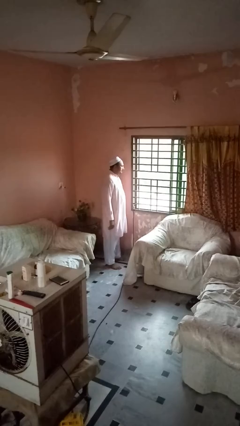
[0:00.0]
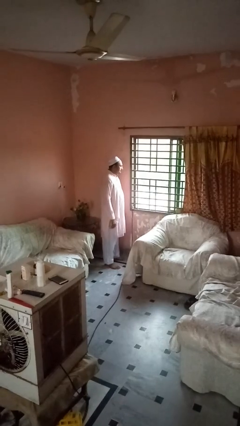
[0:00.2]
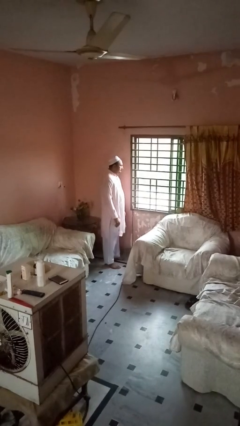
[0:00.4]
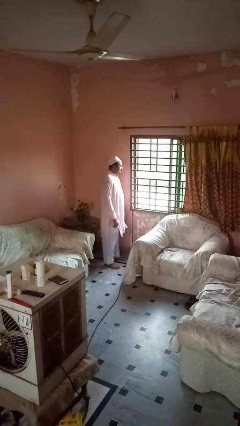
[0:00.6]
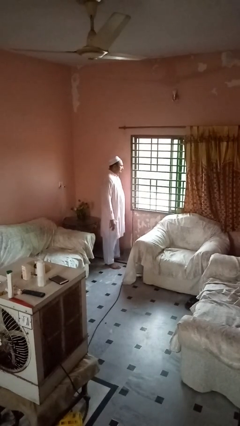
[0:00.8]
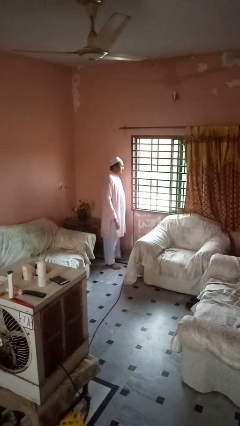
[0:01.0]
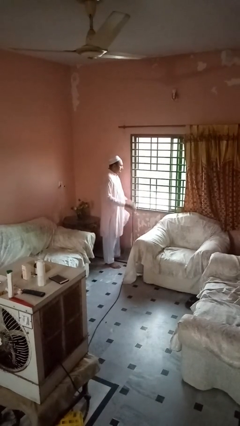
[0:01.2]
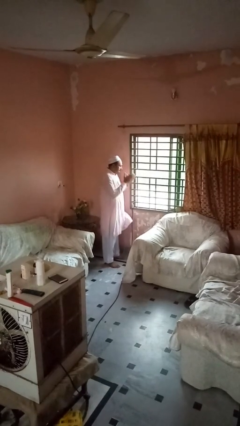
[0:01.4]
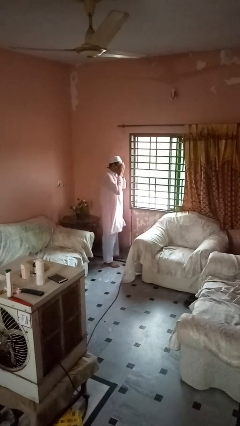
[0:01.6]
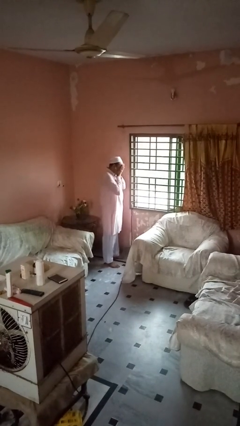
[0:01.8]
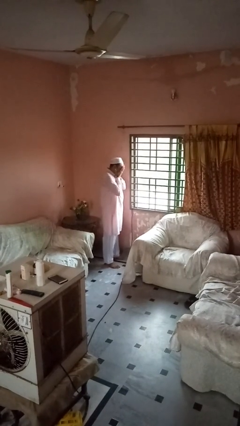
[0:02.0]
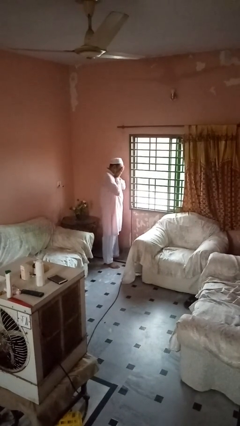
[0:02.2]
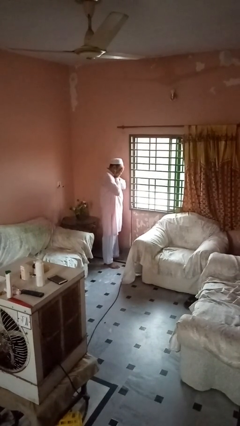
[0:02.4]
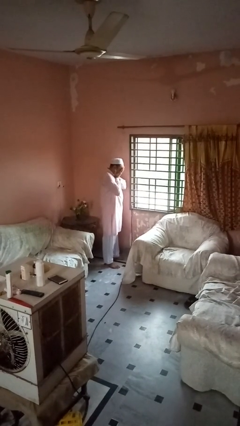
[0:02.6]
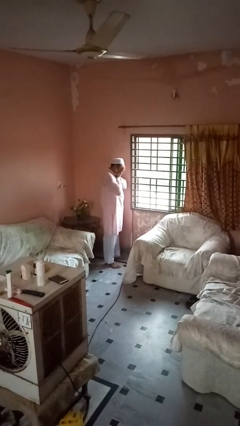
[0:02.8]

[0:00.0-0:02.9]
person covers face with hands

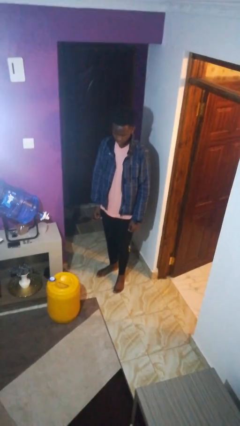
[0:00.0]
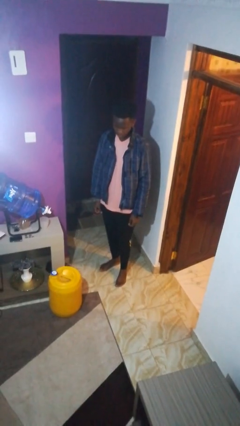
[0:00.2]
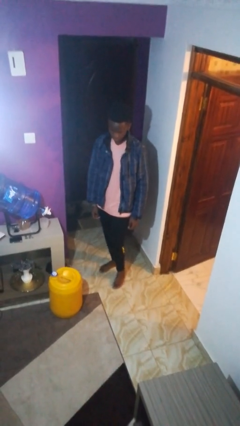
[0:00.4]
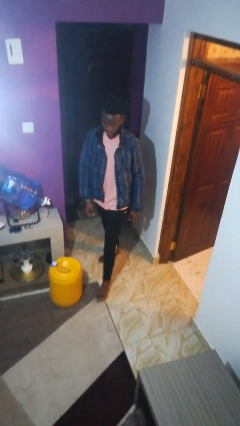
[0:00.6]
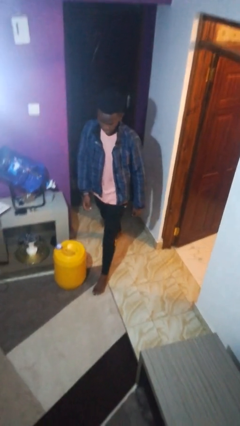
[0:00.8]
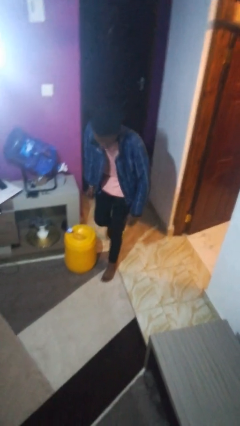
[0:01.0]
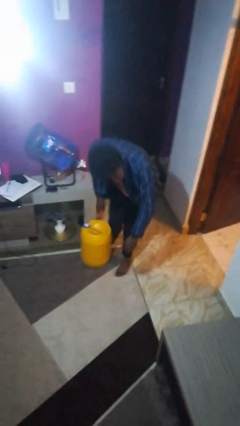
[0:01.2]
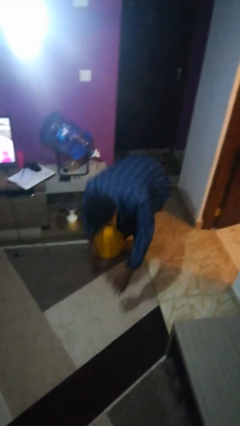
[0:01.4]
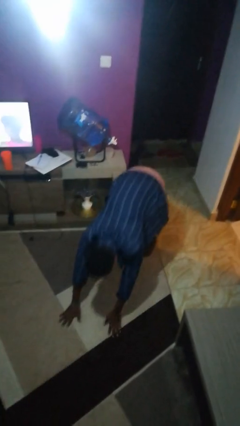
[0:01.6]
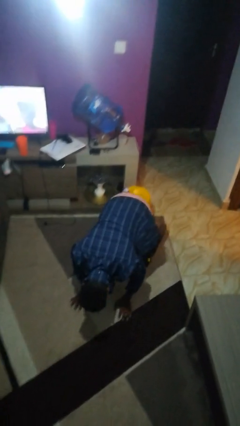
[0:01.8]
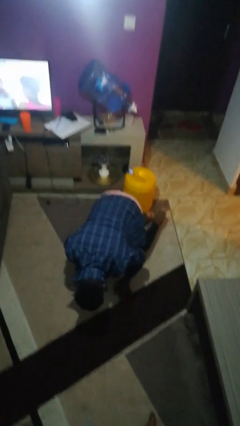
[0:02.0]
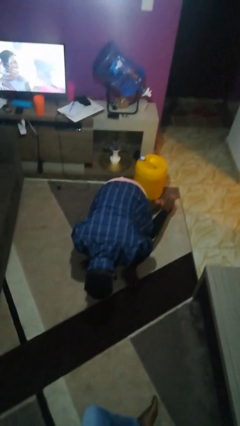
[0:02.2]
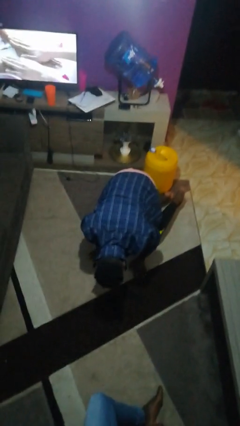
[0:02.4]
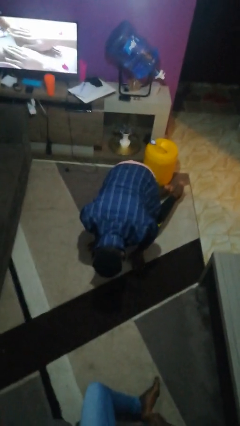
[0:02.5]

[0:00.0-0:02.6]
person trips on object on floor

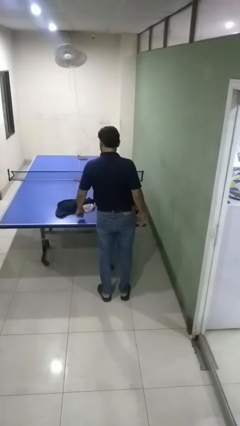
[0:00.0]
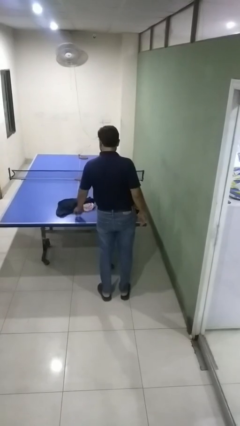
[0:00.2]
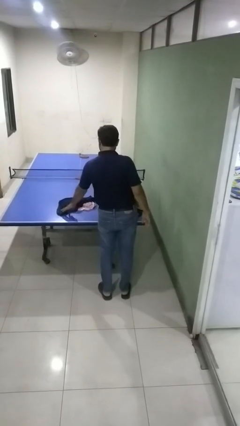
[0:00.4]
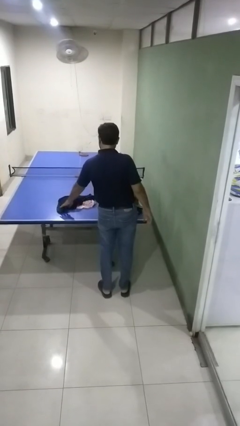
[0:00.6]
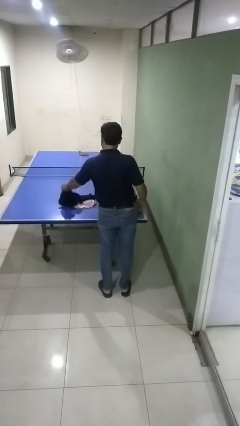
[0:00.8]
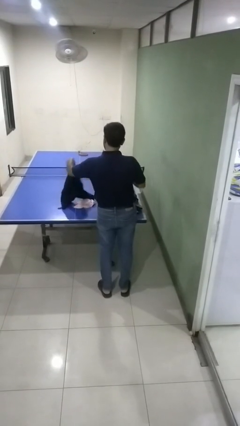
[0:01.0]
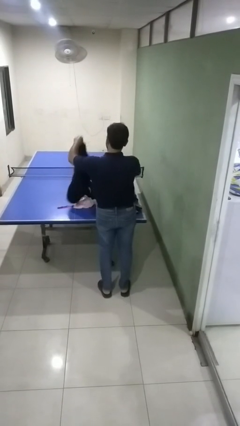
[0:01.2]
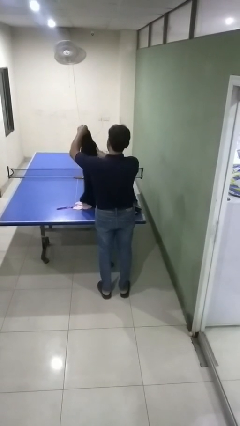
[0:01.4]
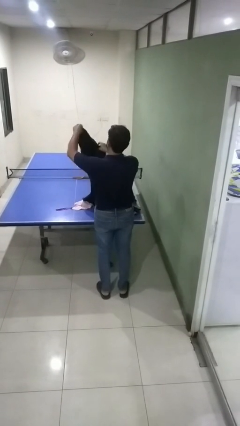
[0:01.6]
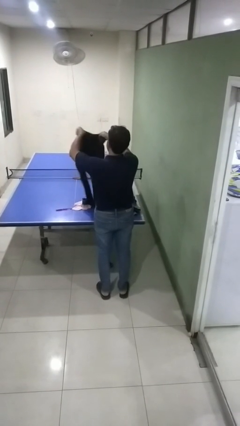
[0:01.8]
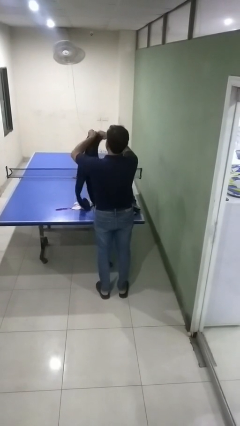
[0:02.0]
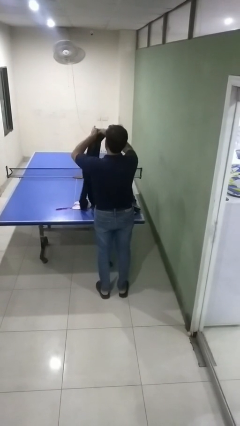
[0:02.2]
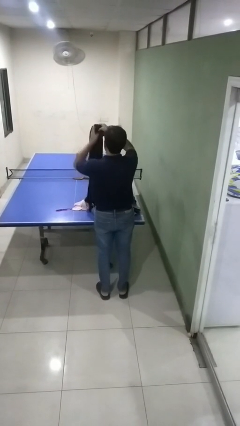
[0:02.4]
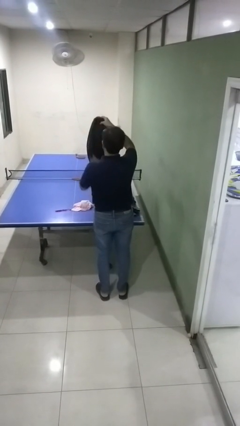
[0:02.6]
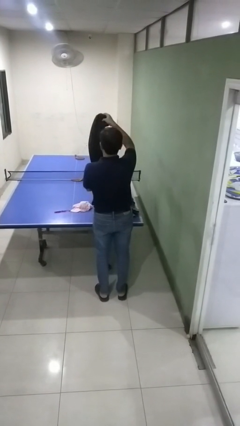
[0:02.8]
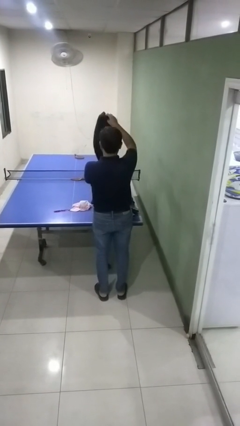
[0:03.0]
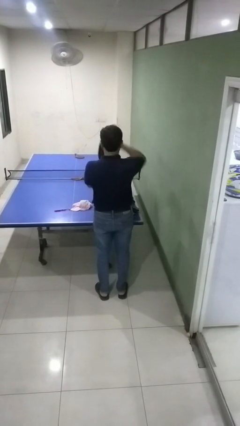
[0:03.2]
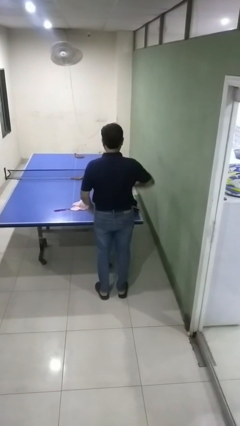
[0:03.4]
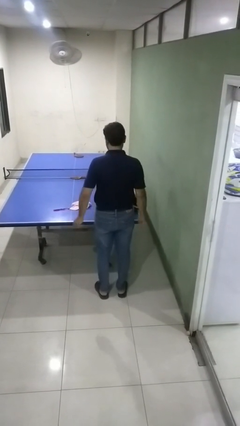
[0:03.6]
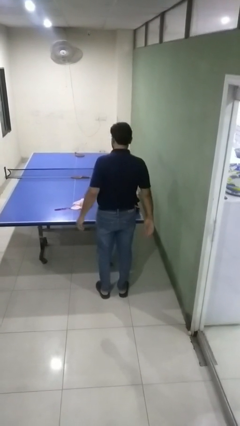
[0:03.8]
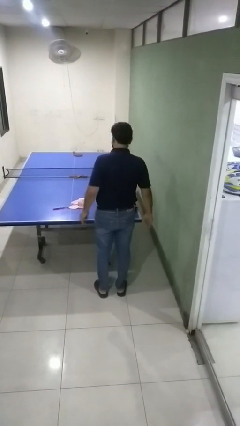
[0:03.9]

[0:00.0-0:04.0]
person folds pants

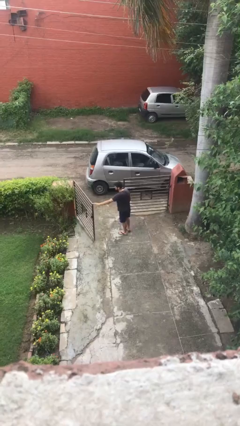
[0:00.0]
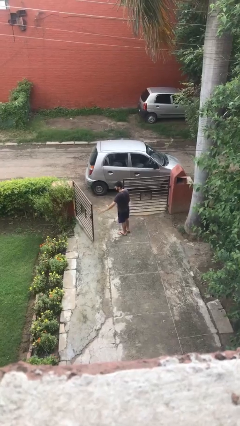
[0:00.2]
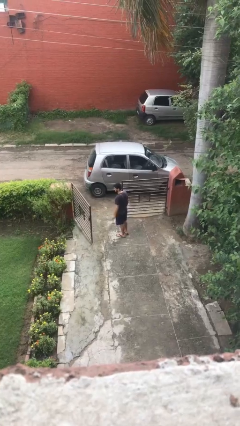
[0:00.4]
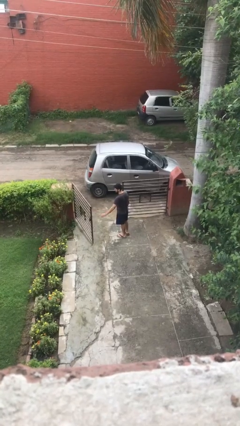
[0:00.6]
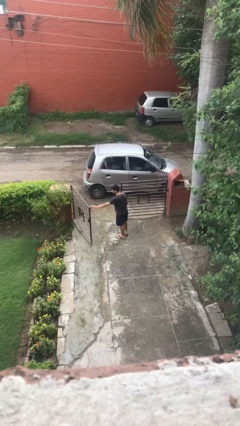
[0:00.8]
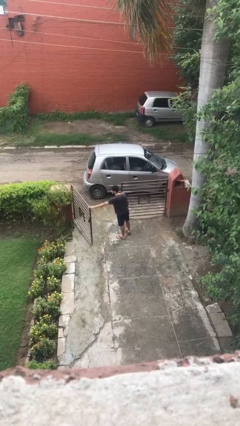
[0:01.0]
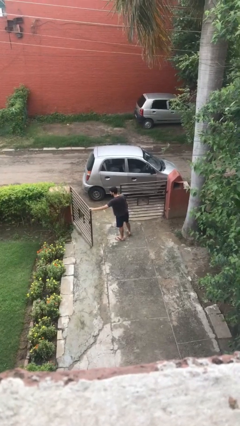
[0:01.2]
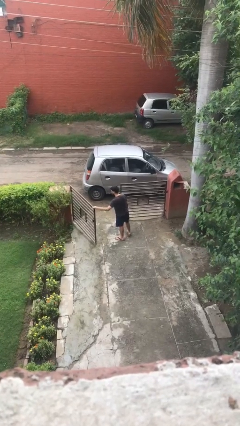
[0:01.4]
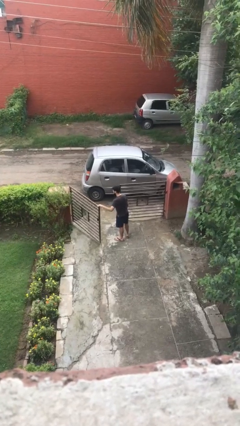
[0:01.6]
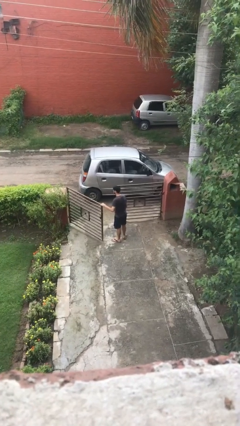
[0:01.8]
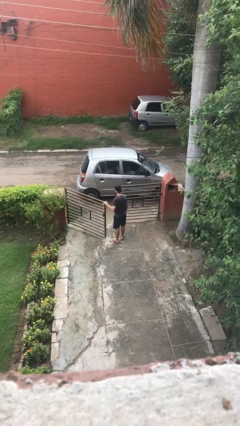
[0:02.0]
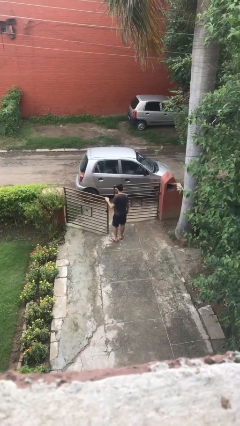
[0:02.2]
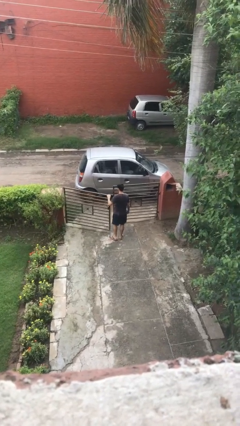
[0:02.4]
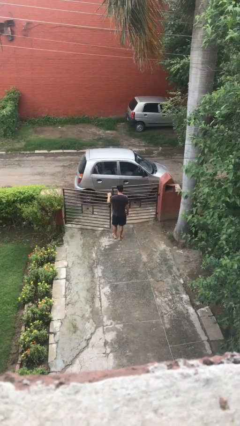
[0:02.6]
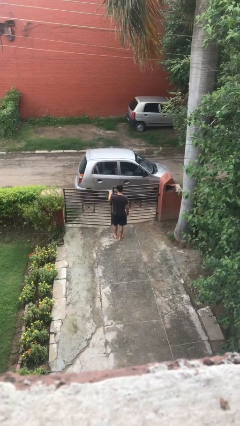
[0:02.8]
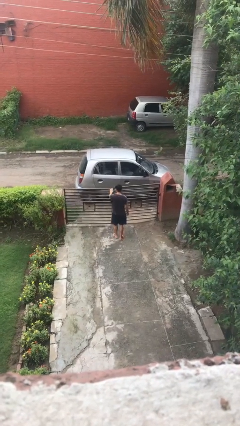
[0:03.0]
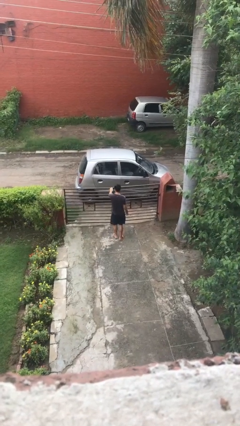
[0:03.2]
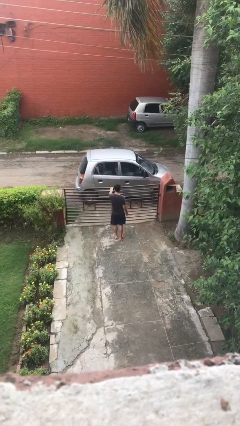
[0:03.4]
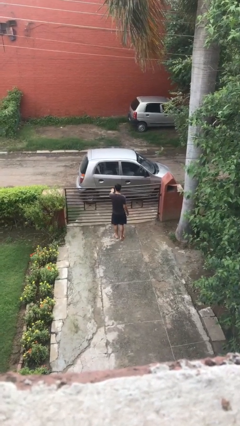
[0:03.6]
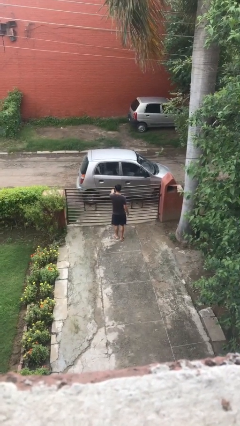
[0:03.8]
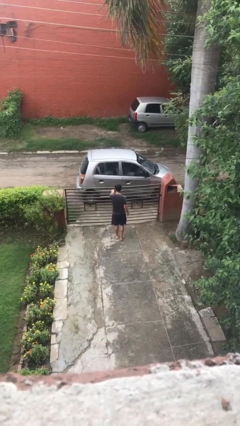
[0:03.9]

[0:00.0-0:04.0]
person closes gate

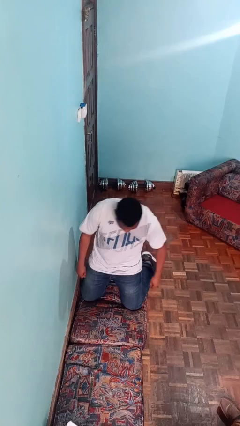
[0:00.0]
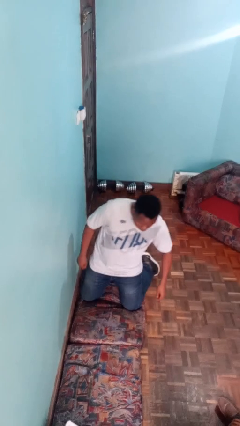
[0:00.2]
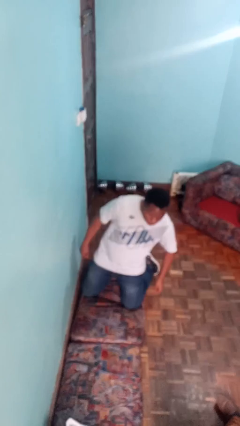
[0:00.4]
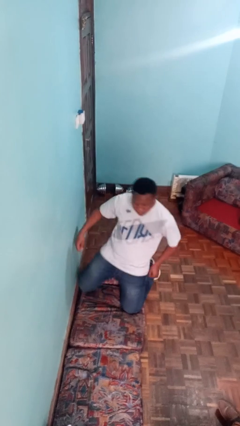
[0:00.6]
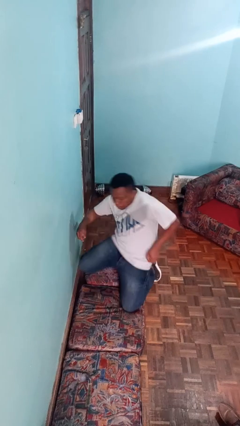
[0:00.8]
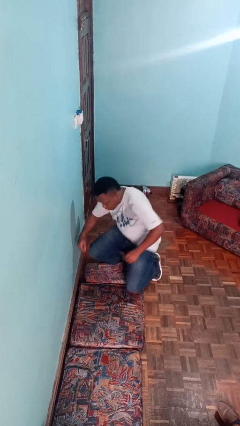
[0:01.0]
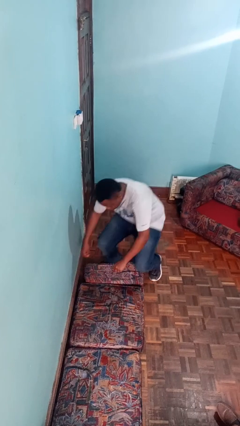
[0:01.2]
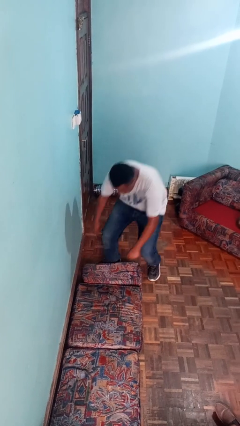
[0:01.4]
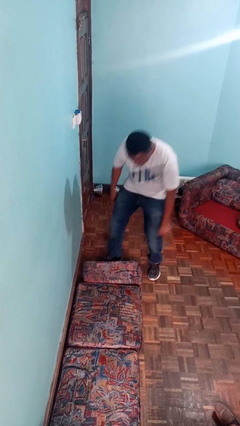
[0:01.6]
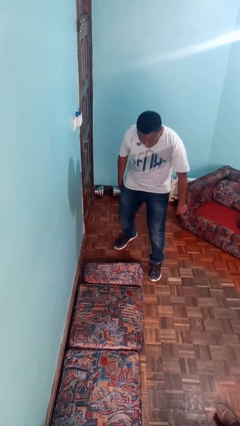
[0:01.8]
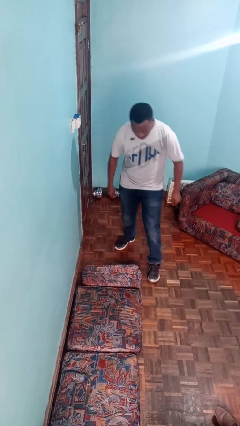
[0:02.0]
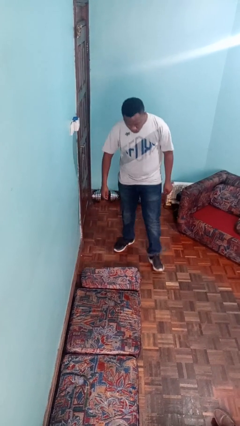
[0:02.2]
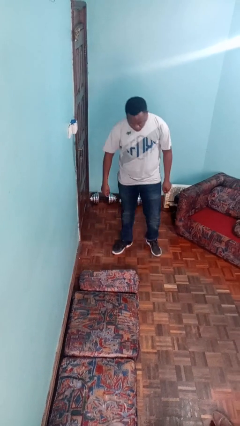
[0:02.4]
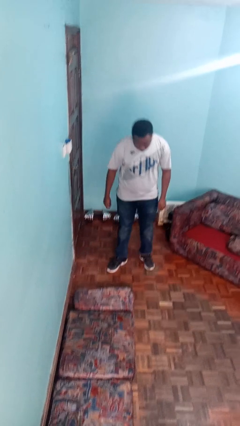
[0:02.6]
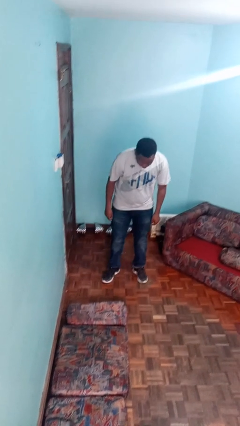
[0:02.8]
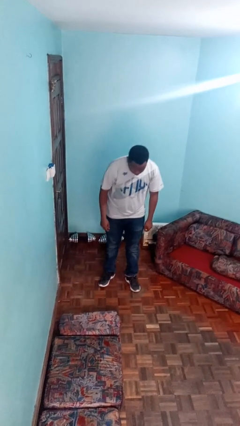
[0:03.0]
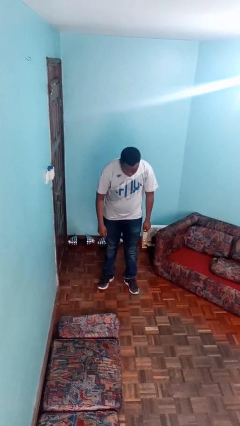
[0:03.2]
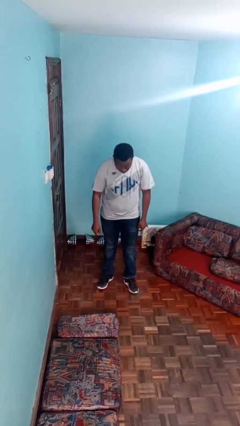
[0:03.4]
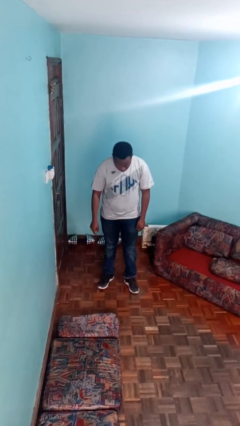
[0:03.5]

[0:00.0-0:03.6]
person stands up from floor

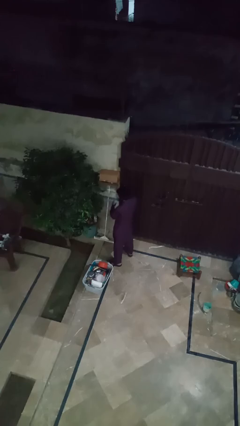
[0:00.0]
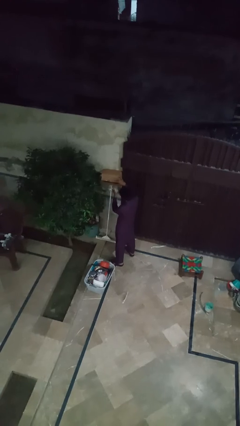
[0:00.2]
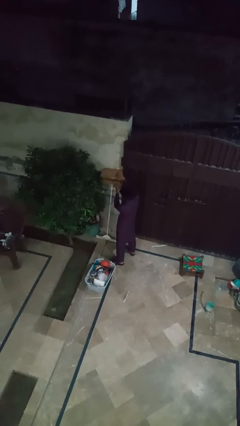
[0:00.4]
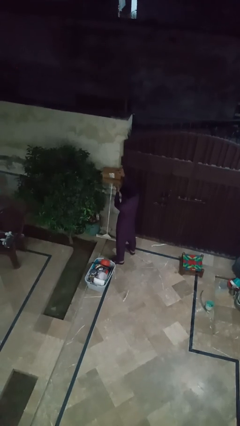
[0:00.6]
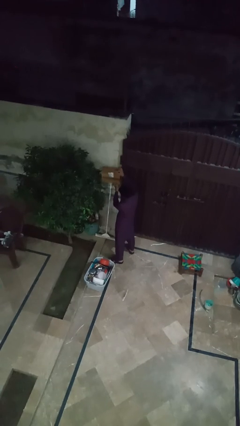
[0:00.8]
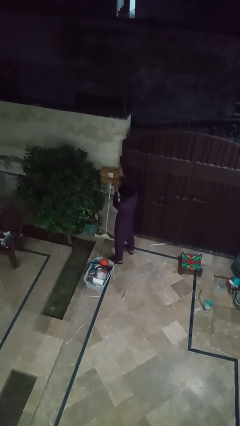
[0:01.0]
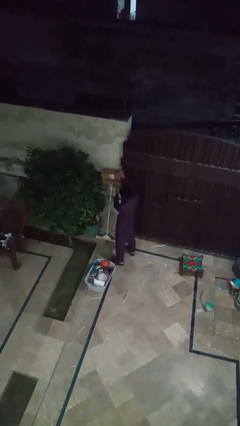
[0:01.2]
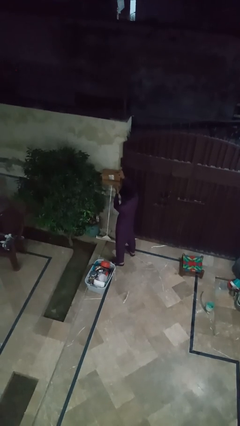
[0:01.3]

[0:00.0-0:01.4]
person opens mailbox
